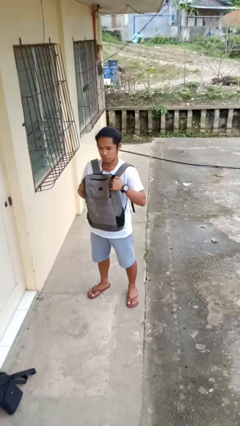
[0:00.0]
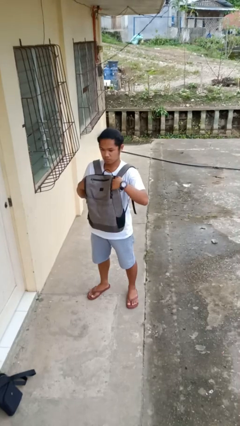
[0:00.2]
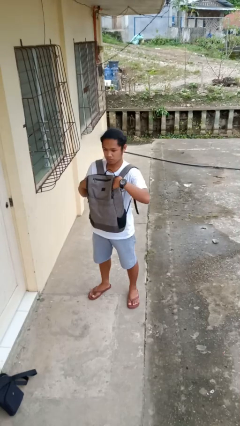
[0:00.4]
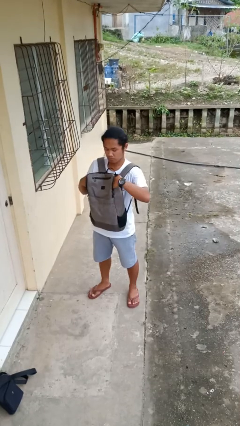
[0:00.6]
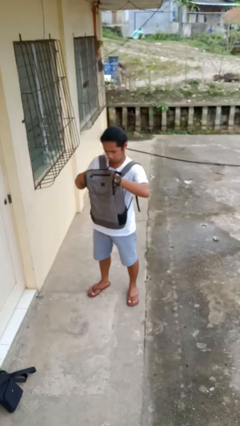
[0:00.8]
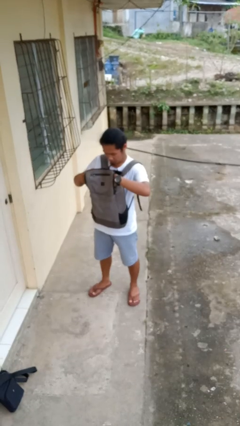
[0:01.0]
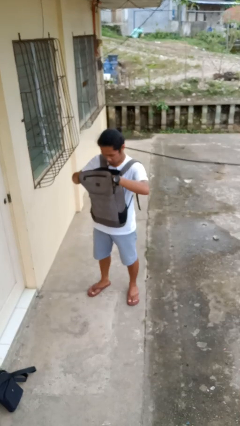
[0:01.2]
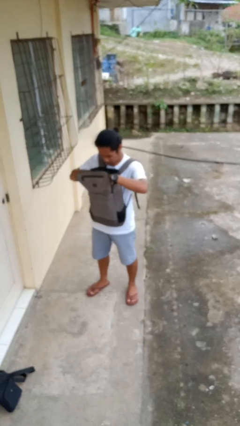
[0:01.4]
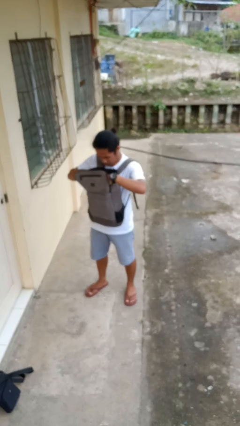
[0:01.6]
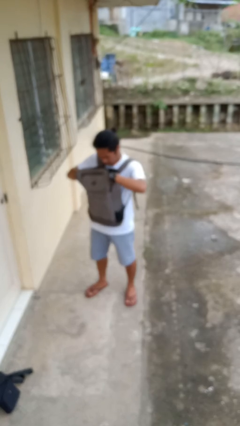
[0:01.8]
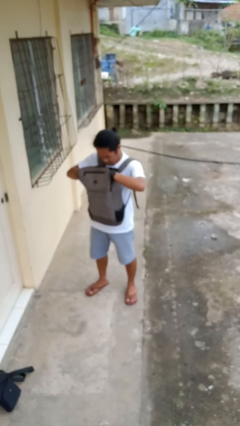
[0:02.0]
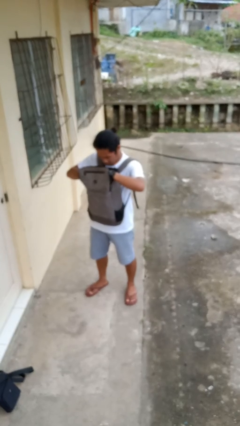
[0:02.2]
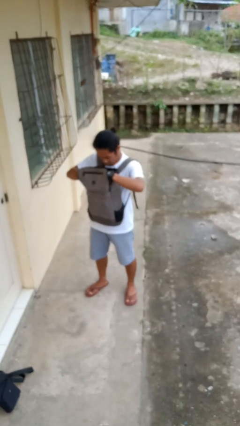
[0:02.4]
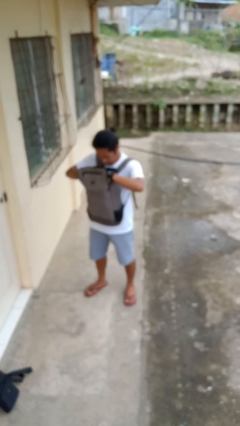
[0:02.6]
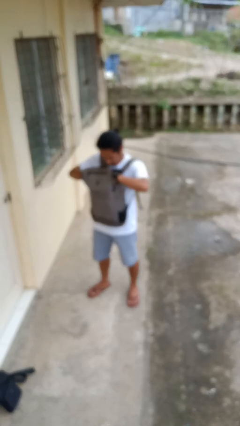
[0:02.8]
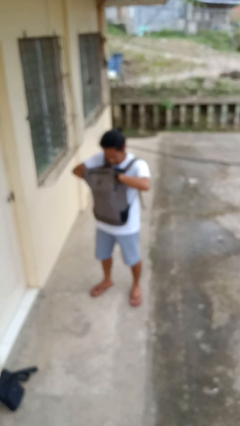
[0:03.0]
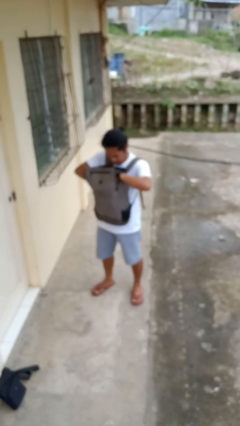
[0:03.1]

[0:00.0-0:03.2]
person searches in backpack

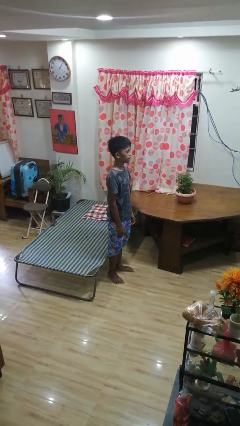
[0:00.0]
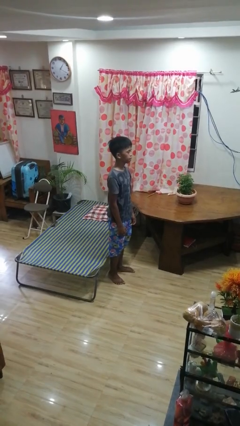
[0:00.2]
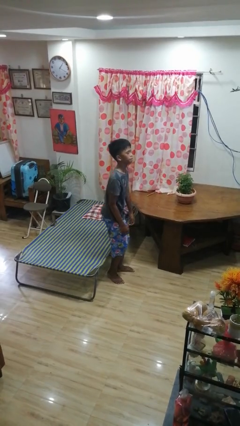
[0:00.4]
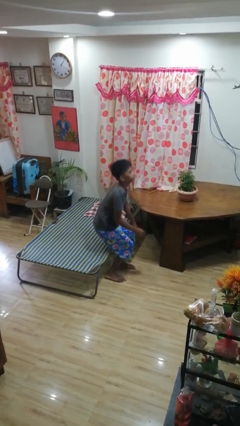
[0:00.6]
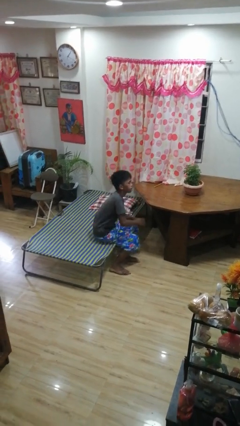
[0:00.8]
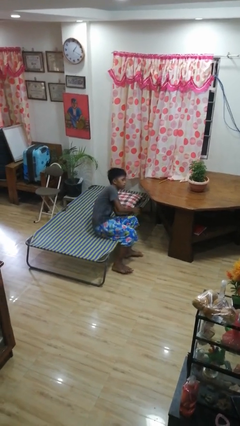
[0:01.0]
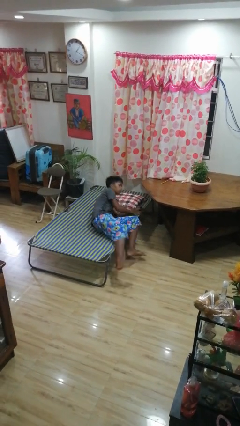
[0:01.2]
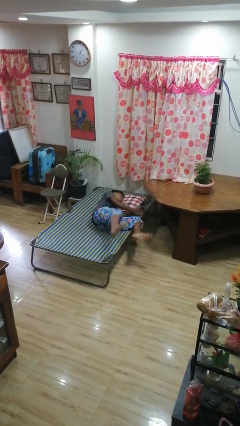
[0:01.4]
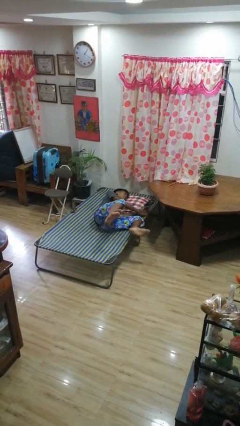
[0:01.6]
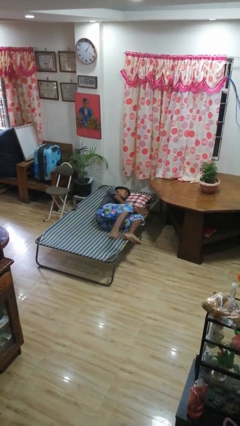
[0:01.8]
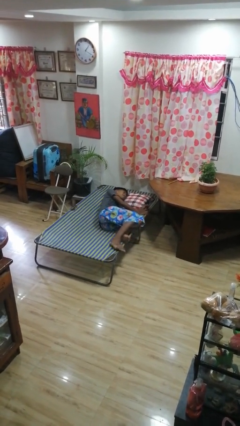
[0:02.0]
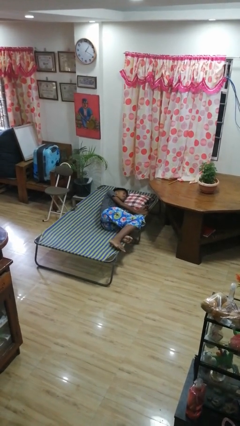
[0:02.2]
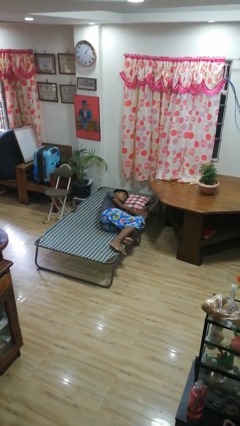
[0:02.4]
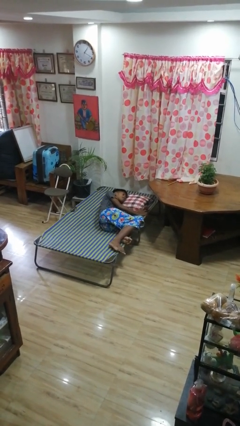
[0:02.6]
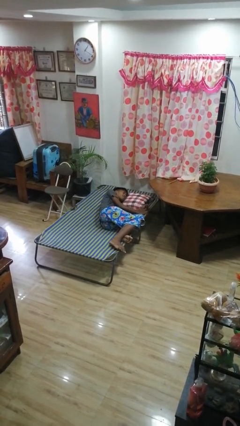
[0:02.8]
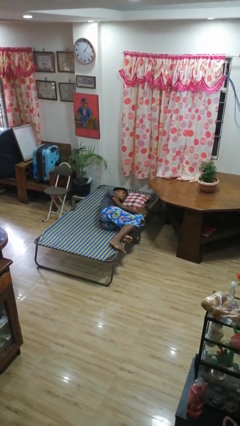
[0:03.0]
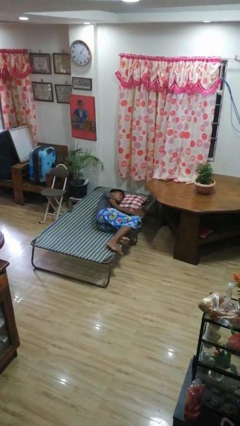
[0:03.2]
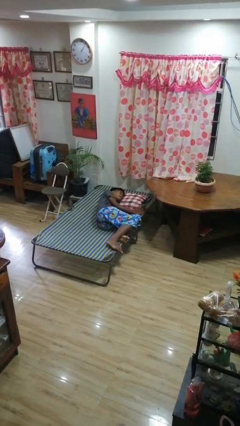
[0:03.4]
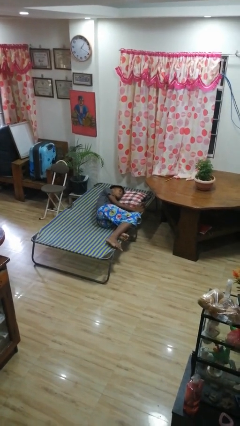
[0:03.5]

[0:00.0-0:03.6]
person lies down on bed

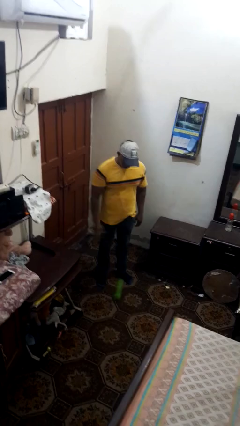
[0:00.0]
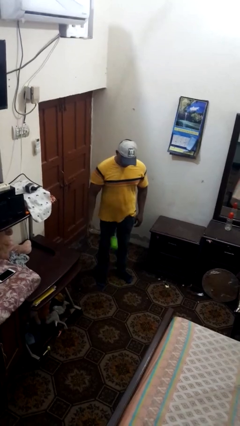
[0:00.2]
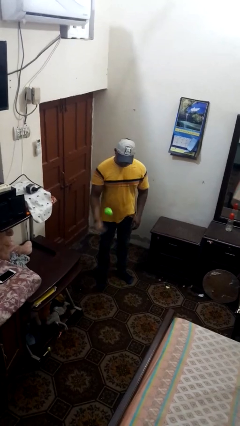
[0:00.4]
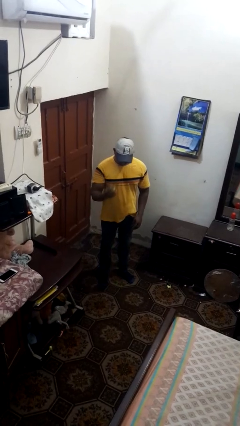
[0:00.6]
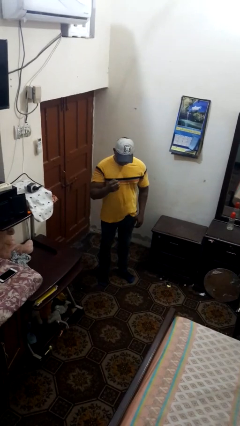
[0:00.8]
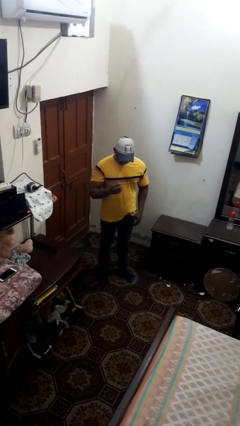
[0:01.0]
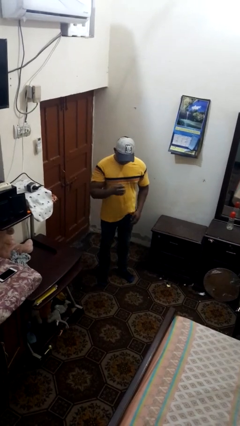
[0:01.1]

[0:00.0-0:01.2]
person bounces ball on floor

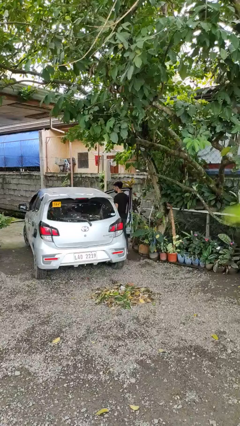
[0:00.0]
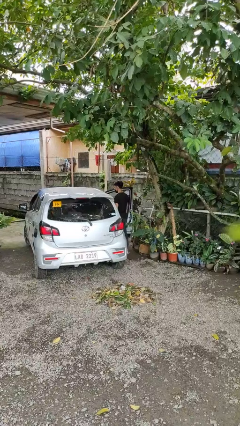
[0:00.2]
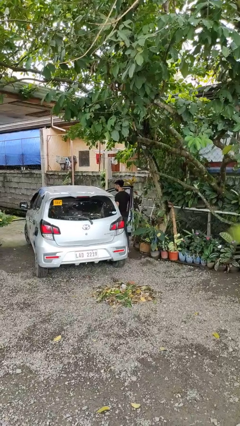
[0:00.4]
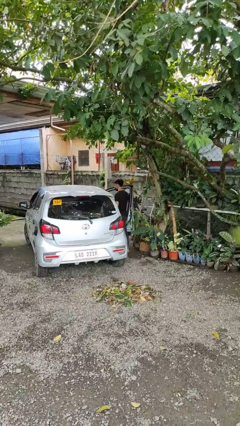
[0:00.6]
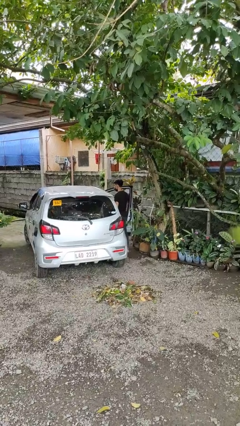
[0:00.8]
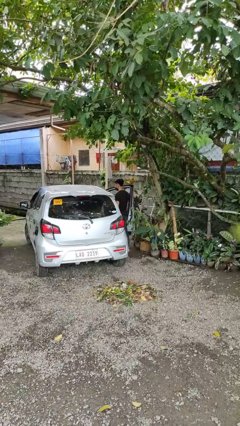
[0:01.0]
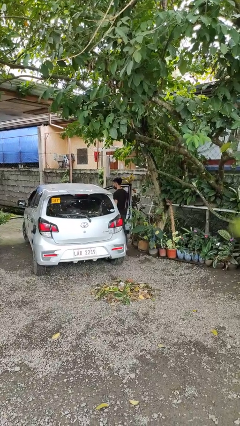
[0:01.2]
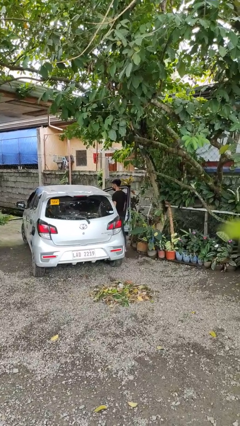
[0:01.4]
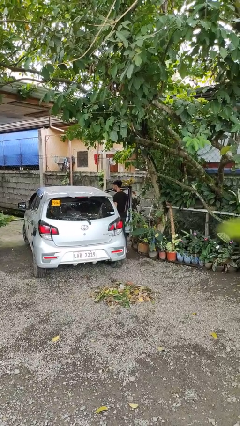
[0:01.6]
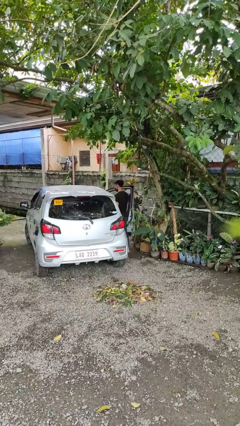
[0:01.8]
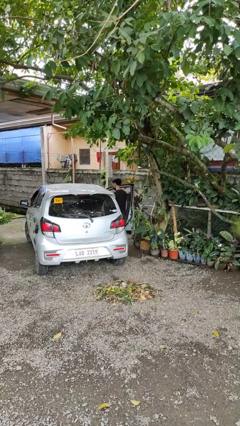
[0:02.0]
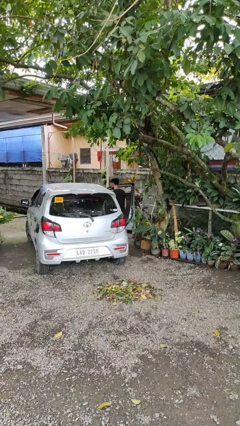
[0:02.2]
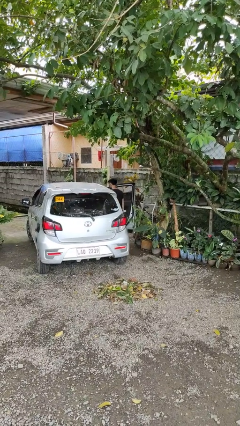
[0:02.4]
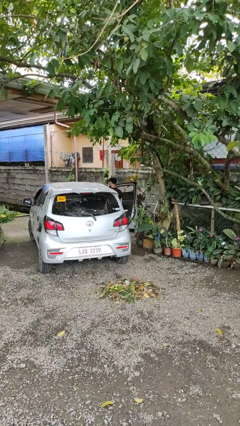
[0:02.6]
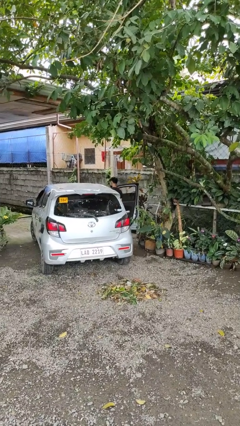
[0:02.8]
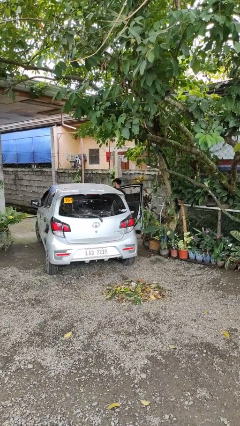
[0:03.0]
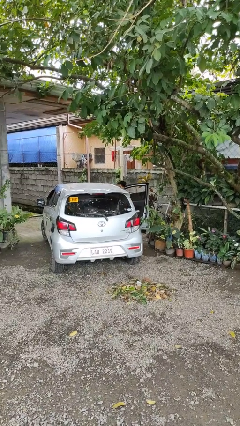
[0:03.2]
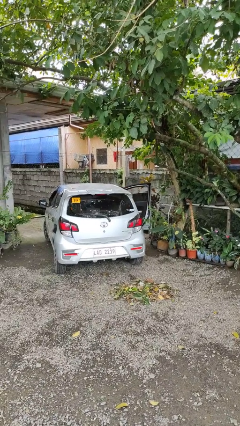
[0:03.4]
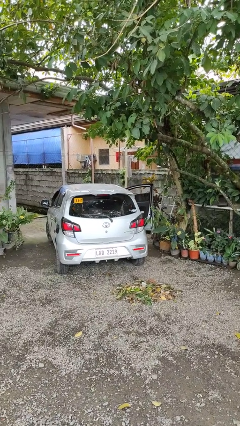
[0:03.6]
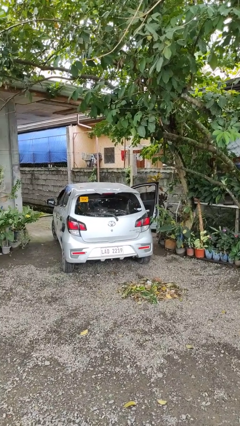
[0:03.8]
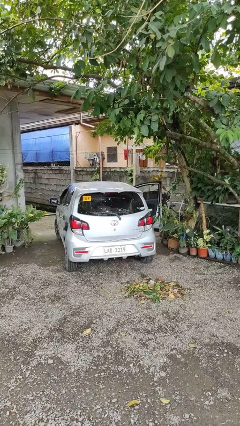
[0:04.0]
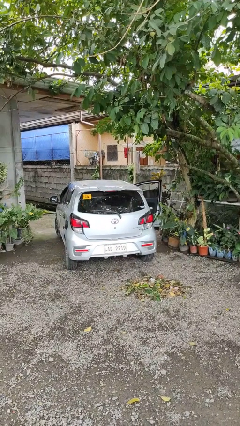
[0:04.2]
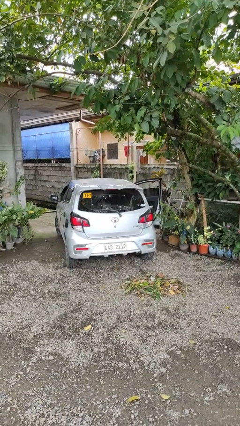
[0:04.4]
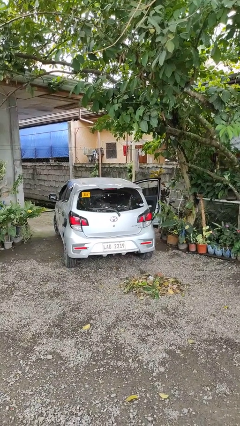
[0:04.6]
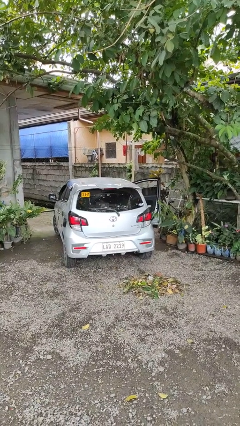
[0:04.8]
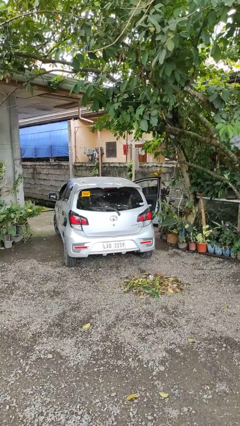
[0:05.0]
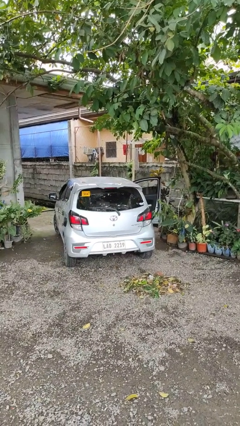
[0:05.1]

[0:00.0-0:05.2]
person enters car

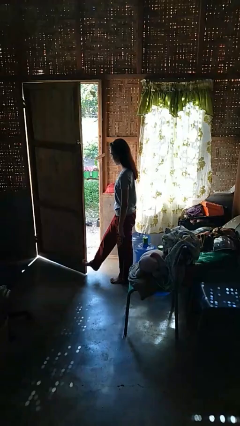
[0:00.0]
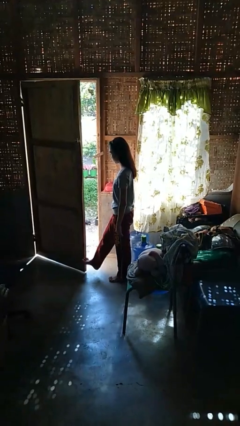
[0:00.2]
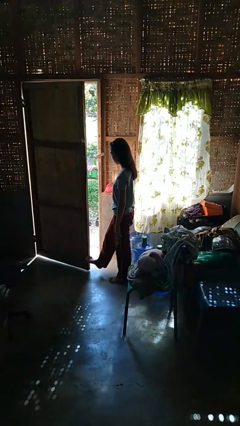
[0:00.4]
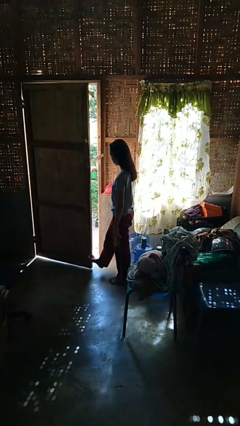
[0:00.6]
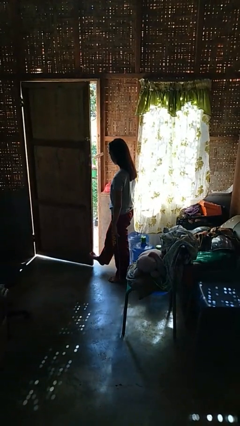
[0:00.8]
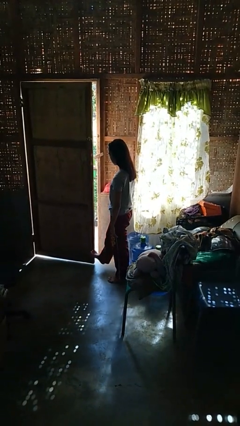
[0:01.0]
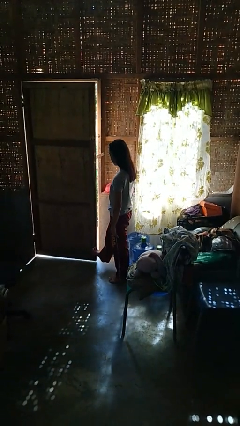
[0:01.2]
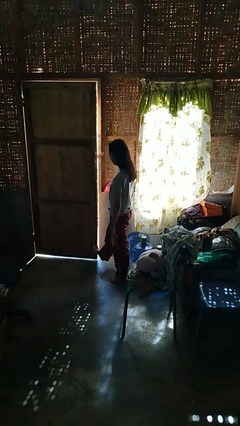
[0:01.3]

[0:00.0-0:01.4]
person closes door with foot

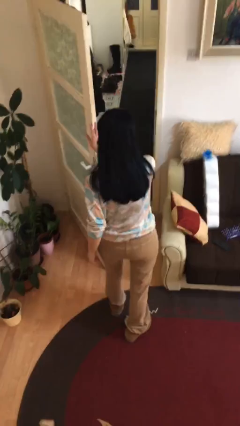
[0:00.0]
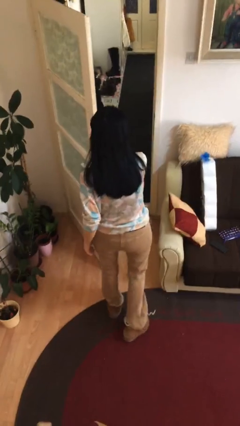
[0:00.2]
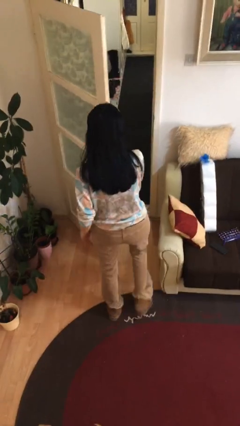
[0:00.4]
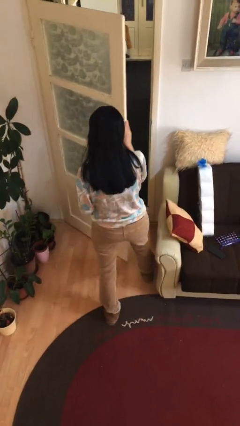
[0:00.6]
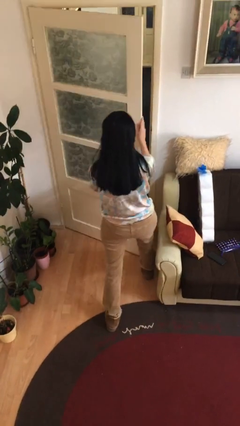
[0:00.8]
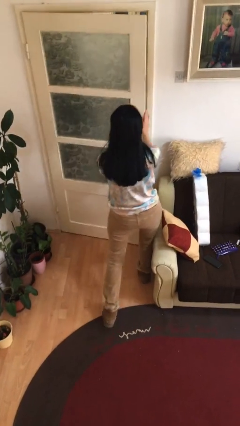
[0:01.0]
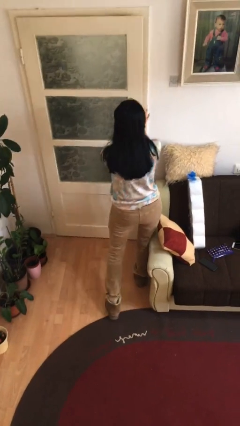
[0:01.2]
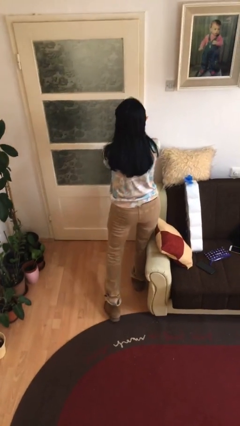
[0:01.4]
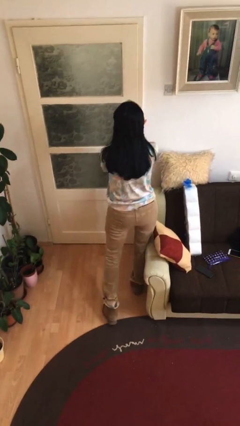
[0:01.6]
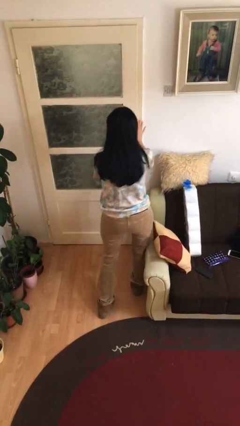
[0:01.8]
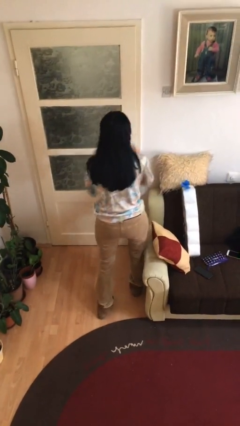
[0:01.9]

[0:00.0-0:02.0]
person closes facility door

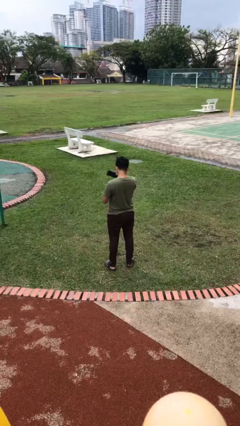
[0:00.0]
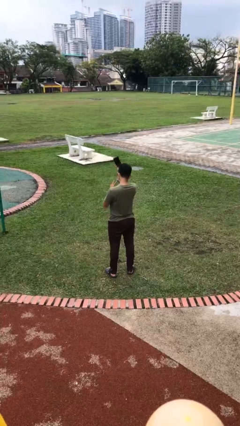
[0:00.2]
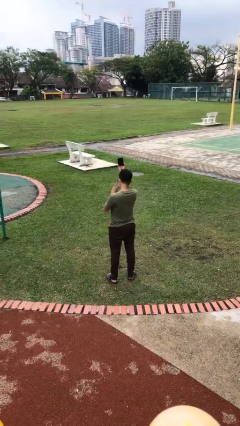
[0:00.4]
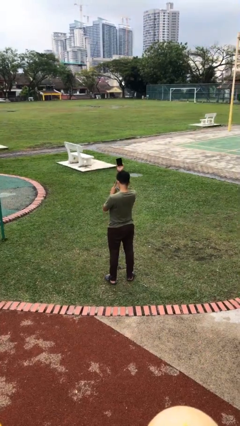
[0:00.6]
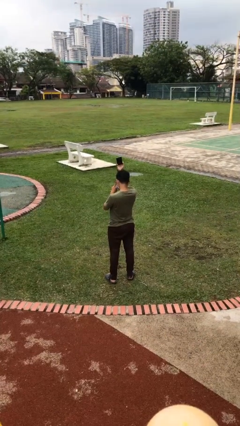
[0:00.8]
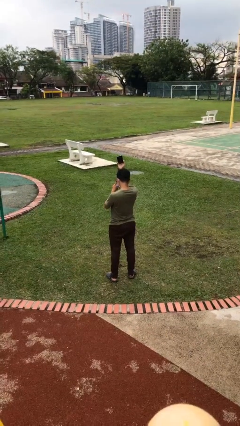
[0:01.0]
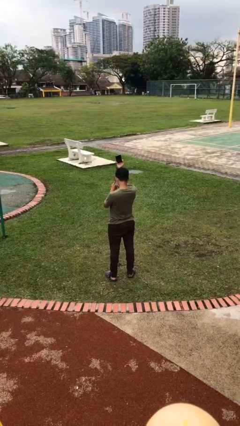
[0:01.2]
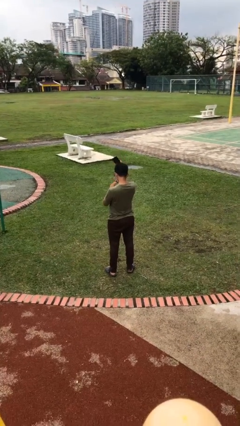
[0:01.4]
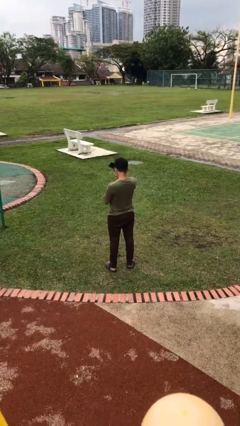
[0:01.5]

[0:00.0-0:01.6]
person takes selfie
